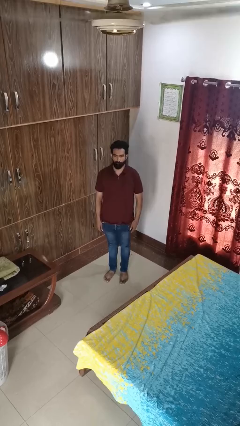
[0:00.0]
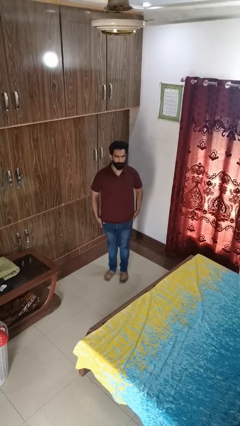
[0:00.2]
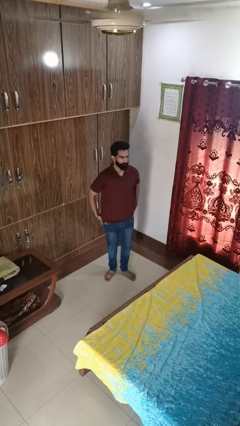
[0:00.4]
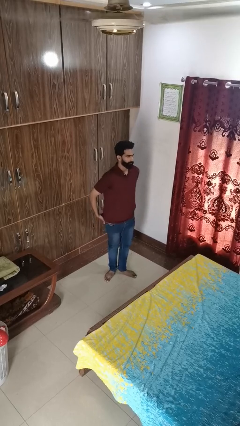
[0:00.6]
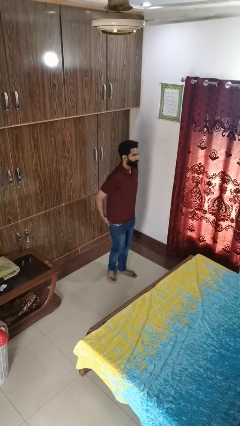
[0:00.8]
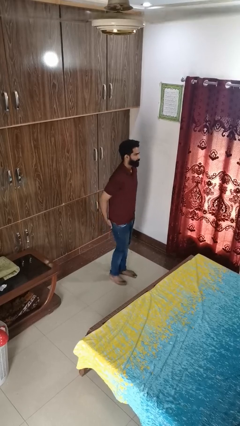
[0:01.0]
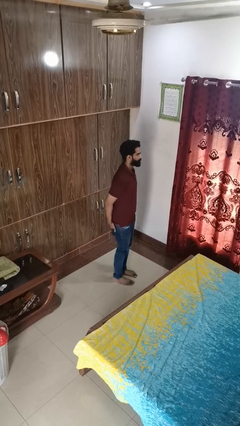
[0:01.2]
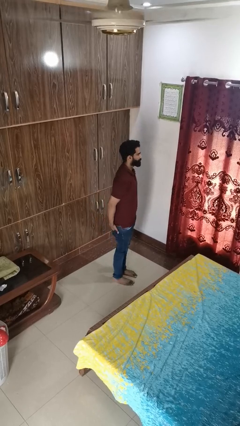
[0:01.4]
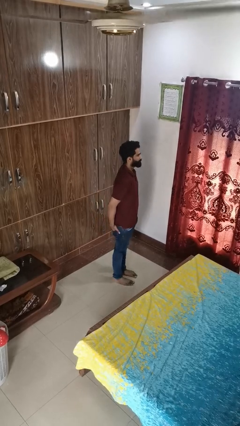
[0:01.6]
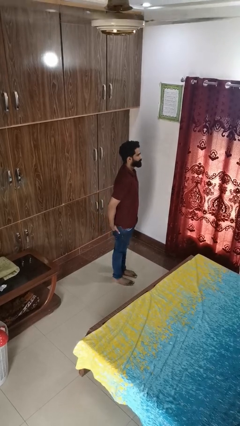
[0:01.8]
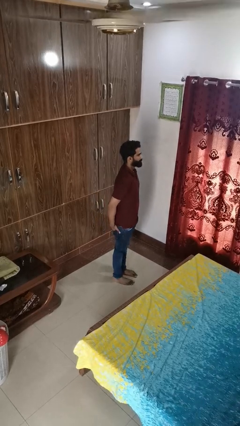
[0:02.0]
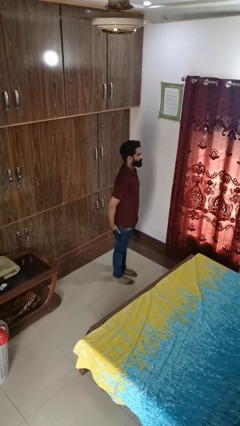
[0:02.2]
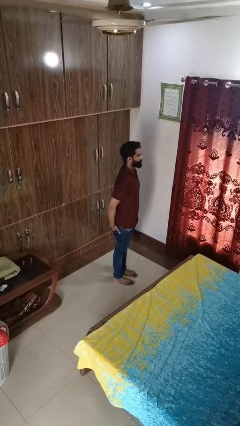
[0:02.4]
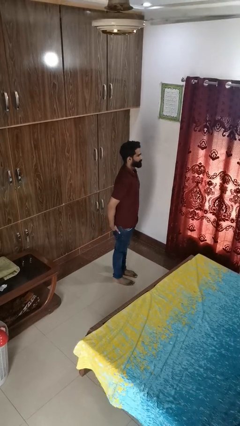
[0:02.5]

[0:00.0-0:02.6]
person puts hands in back pockets

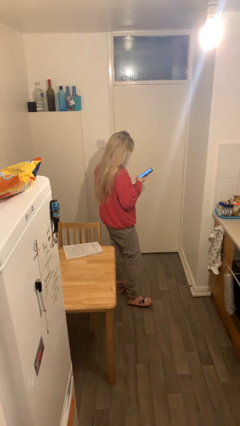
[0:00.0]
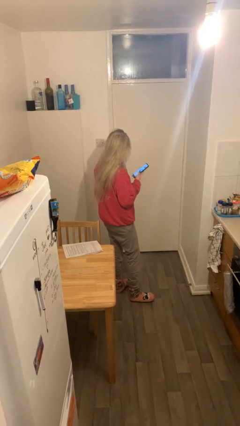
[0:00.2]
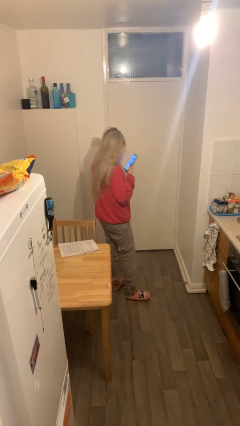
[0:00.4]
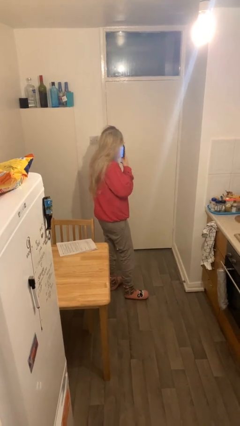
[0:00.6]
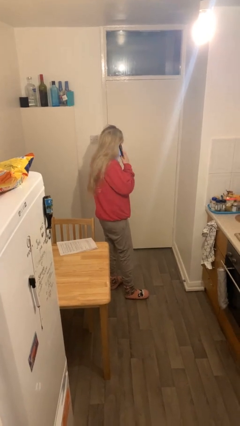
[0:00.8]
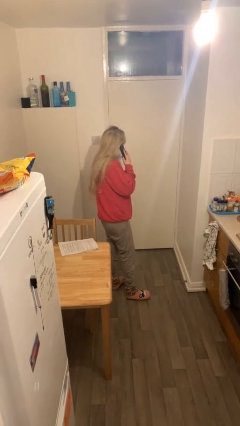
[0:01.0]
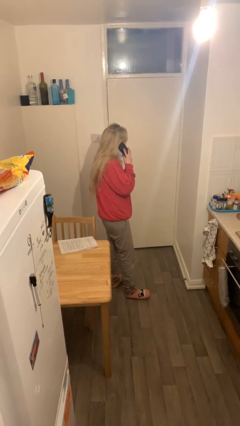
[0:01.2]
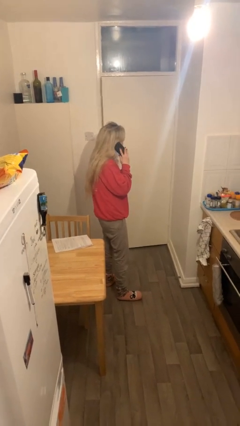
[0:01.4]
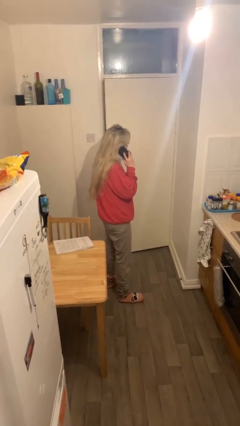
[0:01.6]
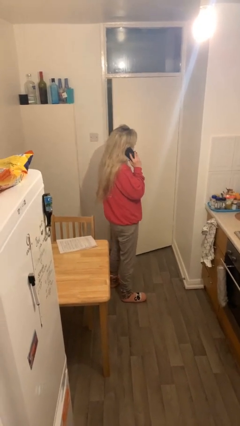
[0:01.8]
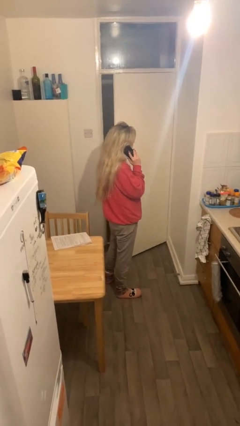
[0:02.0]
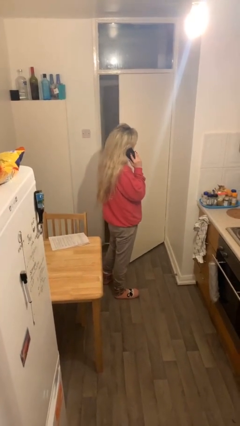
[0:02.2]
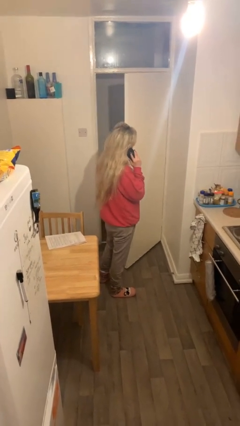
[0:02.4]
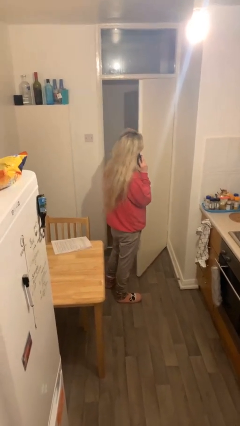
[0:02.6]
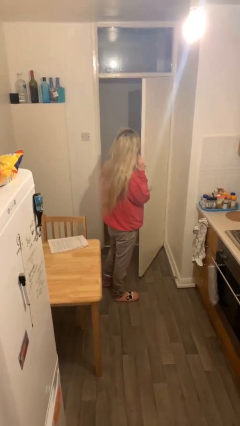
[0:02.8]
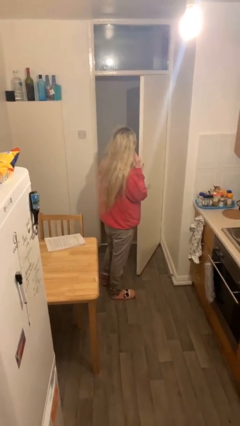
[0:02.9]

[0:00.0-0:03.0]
person opens facility door

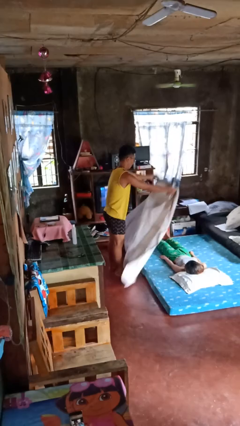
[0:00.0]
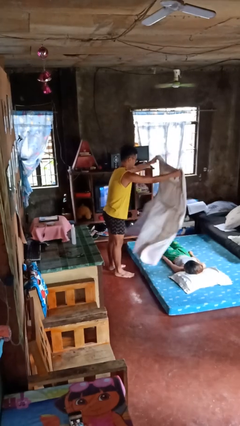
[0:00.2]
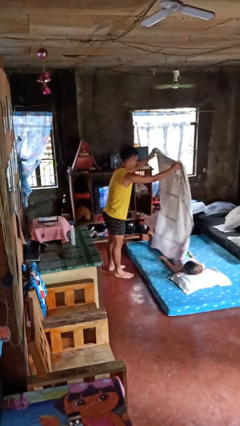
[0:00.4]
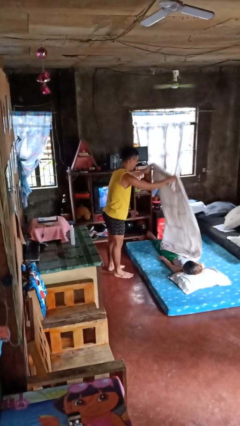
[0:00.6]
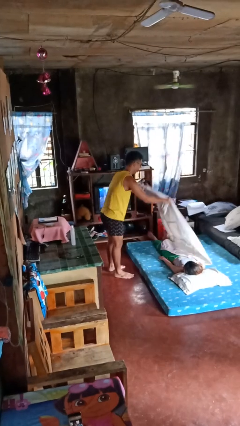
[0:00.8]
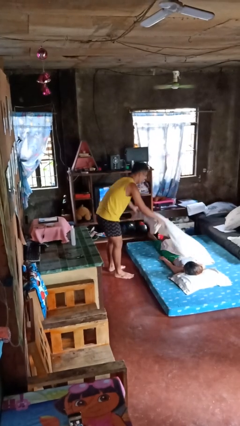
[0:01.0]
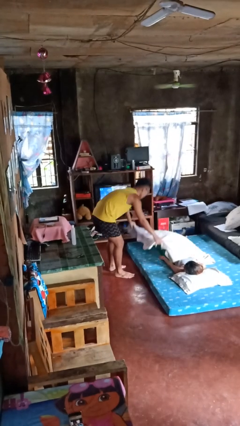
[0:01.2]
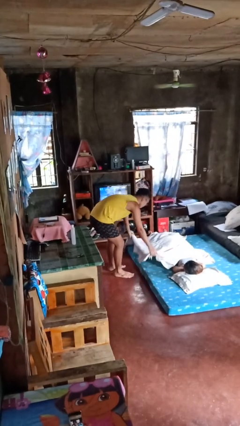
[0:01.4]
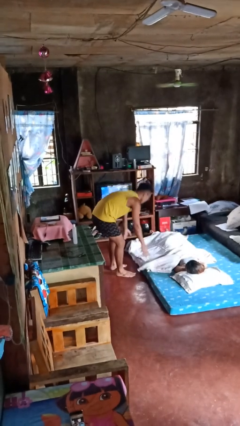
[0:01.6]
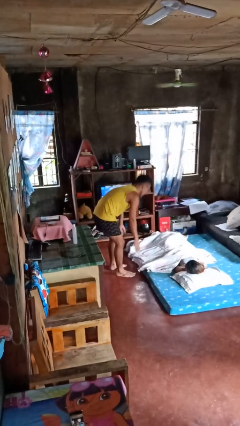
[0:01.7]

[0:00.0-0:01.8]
person covers friend with blanket

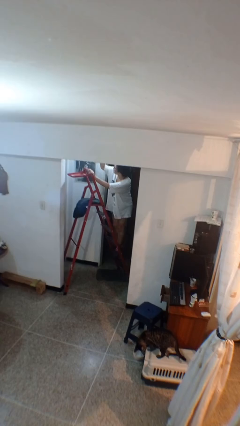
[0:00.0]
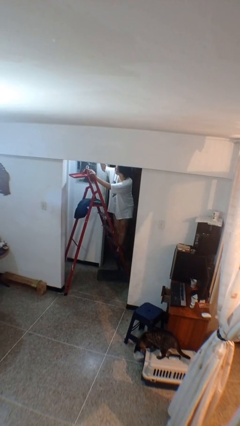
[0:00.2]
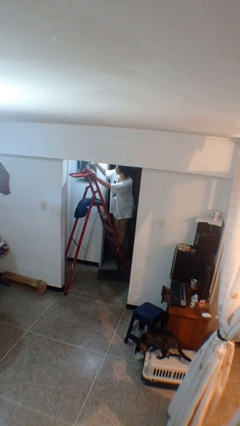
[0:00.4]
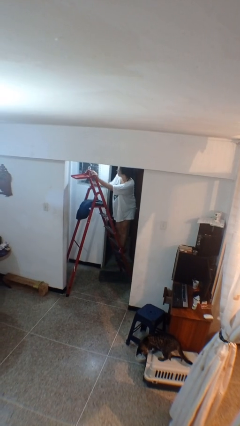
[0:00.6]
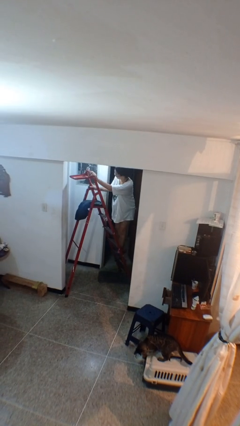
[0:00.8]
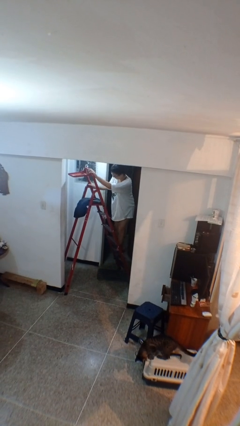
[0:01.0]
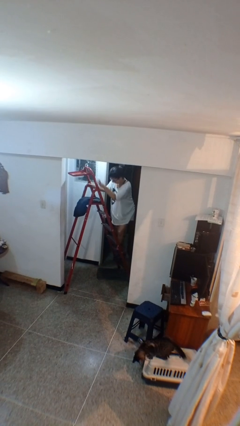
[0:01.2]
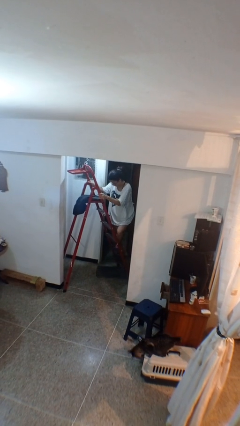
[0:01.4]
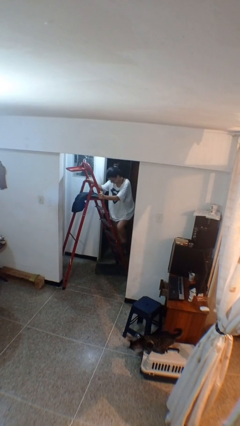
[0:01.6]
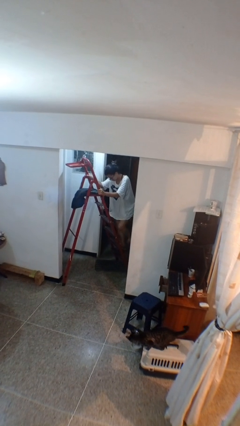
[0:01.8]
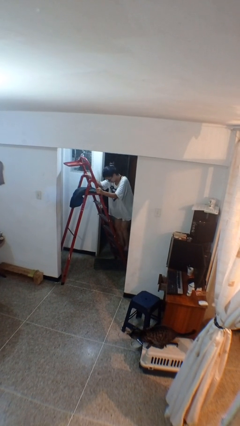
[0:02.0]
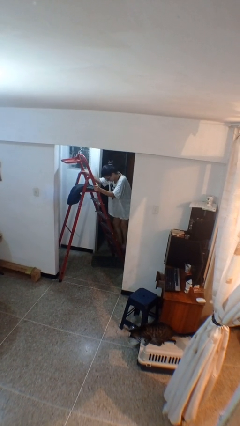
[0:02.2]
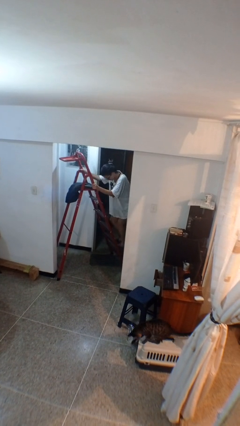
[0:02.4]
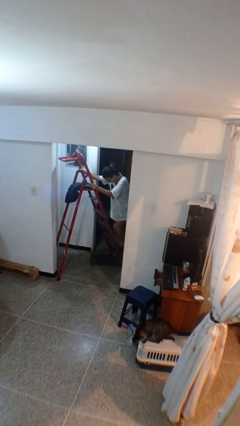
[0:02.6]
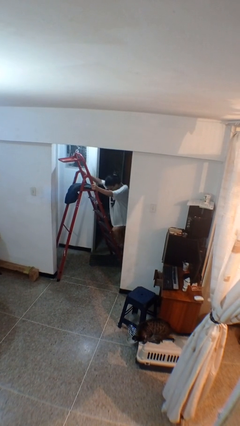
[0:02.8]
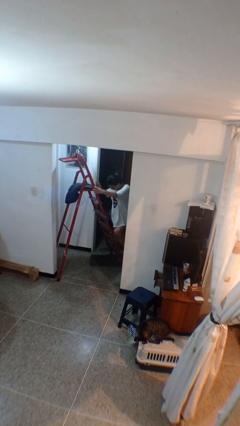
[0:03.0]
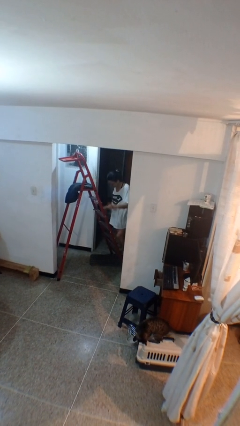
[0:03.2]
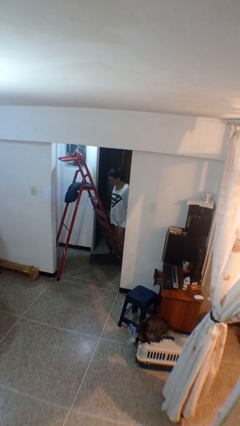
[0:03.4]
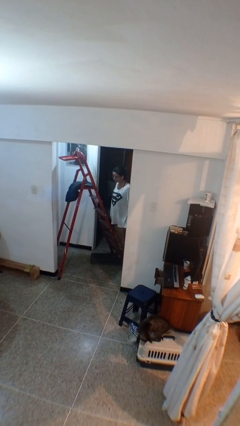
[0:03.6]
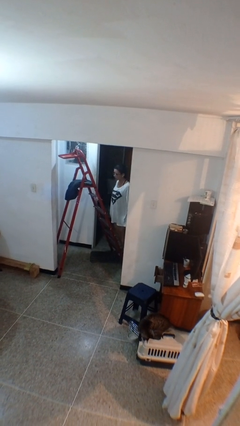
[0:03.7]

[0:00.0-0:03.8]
person climbs down ladder

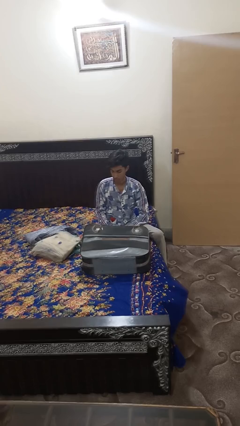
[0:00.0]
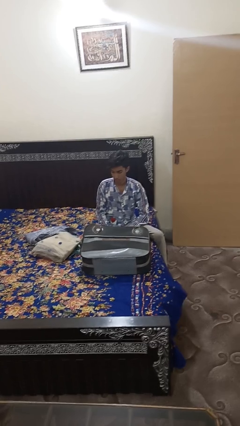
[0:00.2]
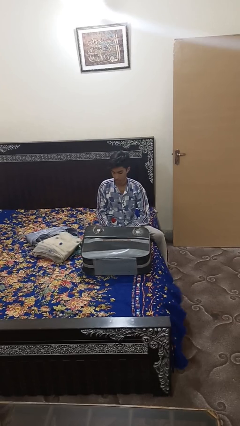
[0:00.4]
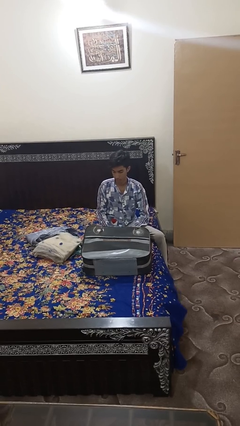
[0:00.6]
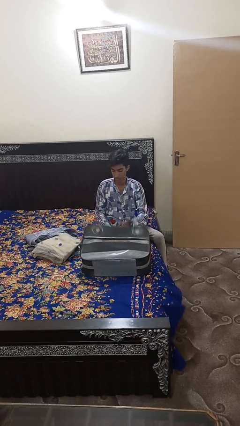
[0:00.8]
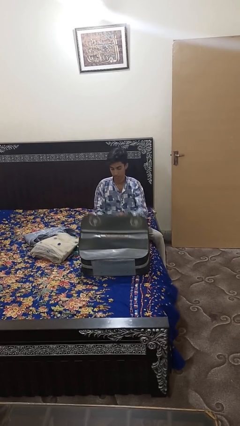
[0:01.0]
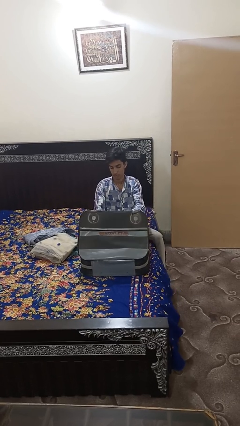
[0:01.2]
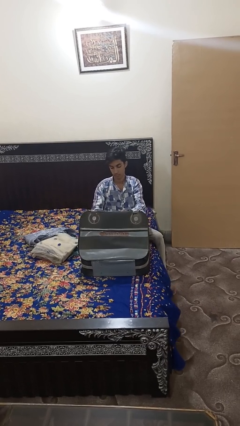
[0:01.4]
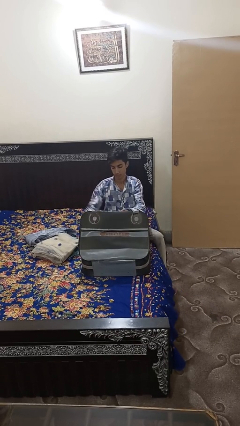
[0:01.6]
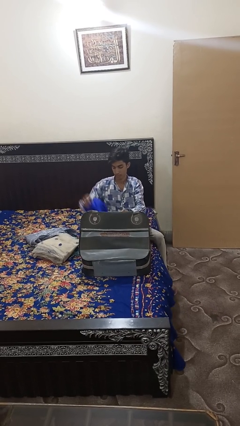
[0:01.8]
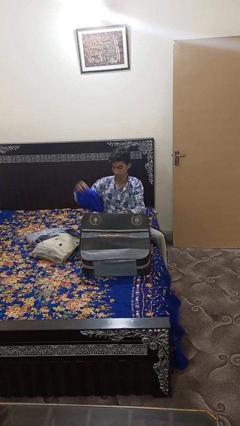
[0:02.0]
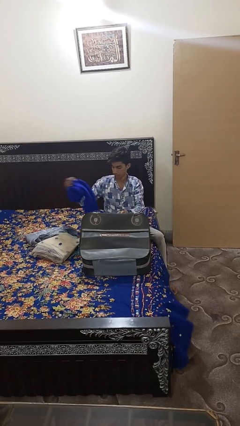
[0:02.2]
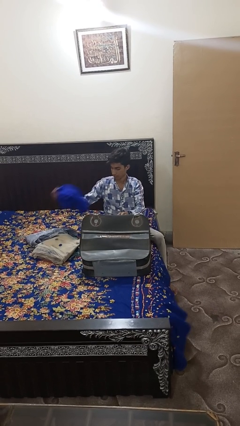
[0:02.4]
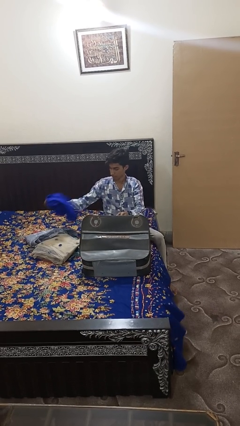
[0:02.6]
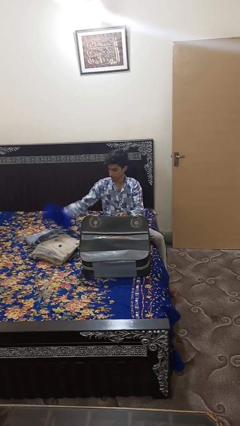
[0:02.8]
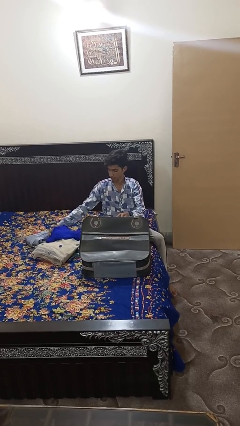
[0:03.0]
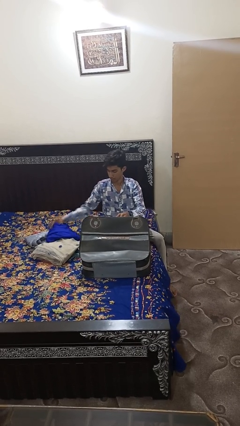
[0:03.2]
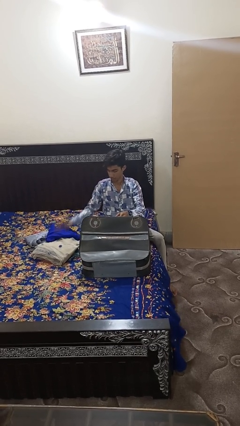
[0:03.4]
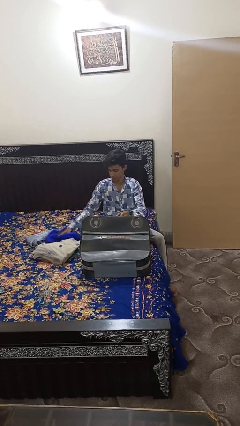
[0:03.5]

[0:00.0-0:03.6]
person unloads clothes from suitcase

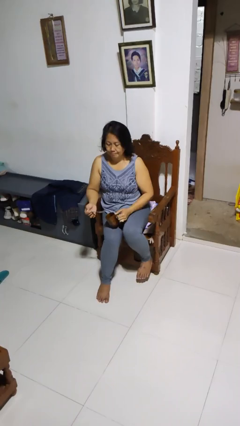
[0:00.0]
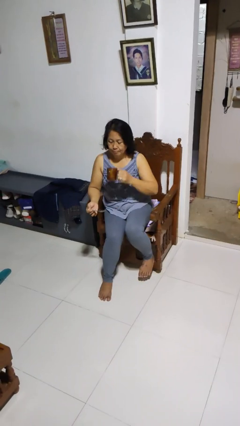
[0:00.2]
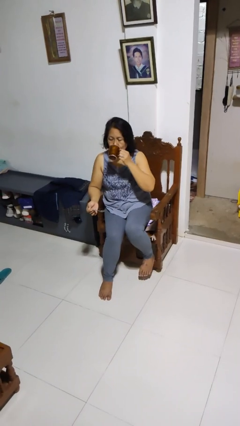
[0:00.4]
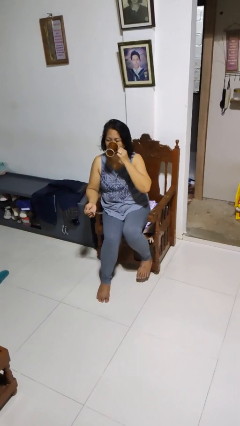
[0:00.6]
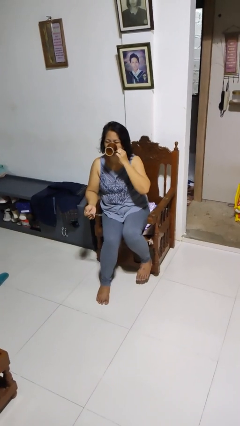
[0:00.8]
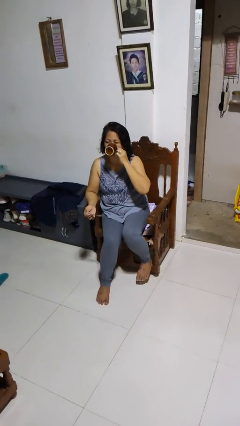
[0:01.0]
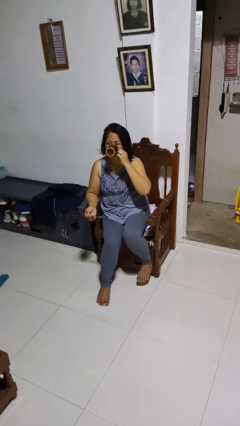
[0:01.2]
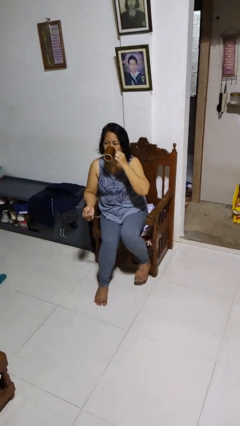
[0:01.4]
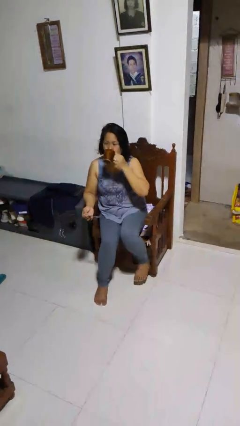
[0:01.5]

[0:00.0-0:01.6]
person drinks from mug

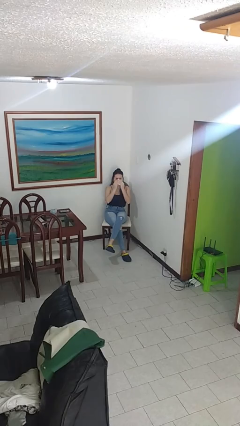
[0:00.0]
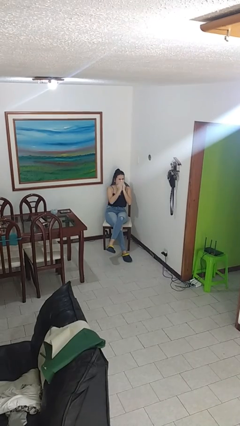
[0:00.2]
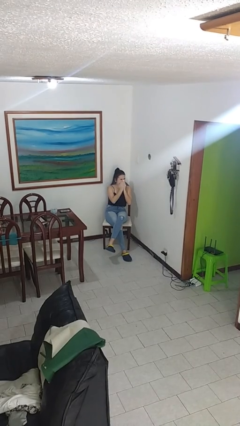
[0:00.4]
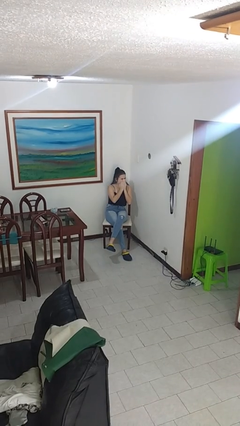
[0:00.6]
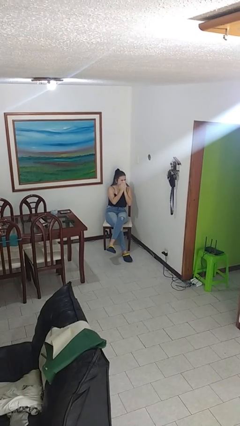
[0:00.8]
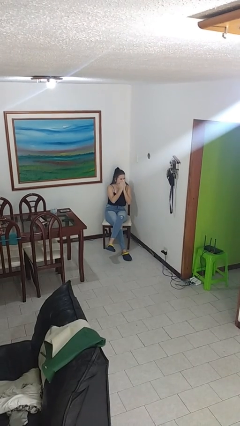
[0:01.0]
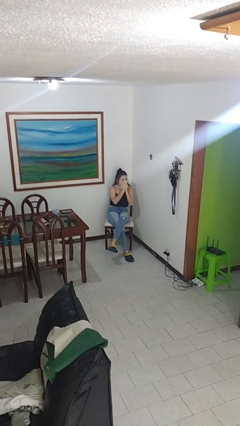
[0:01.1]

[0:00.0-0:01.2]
person blows nose
